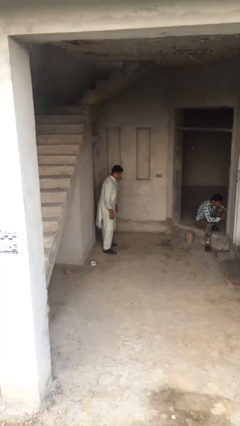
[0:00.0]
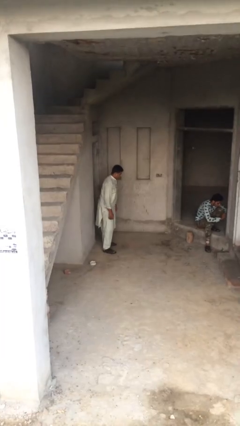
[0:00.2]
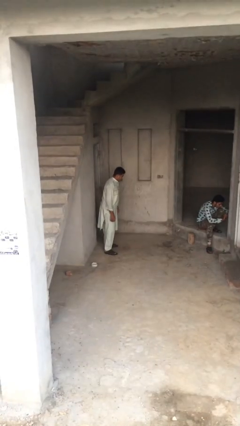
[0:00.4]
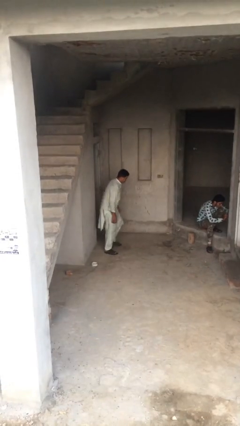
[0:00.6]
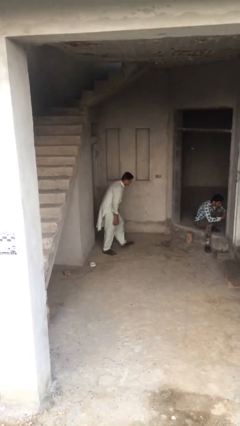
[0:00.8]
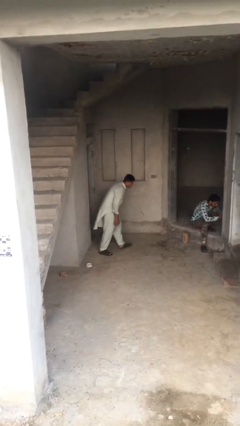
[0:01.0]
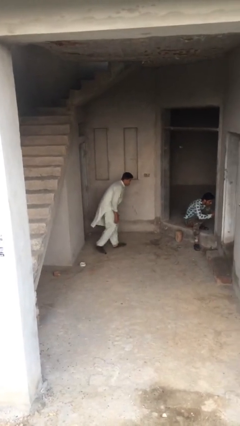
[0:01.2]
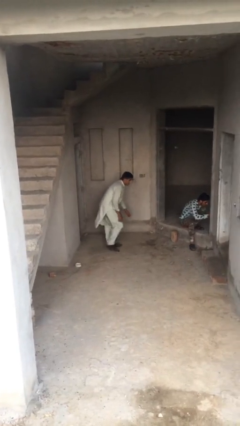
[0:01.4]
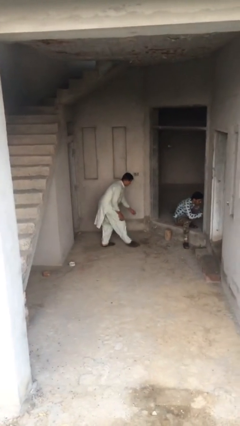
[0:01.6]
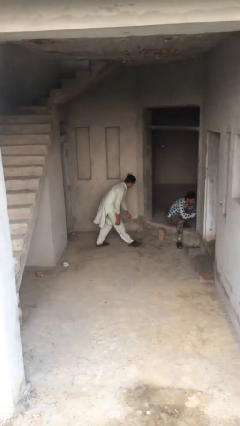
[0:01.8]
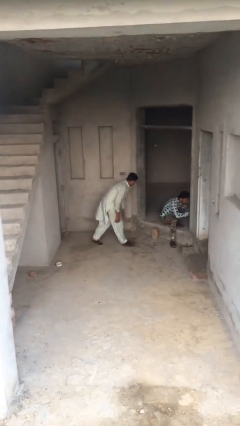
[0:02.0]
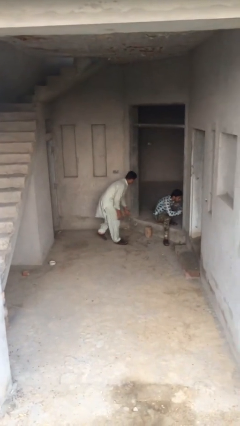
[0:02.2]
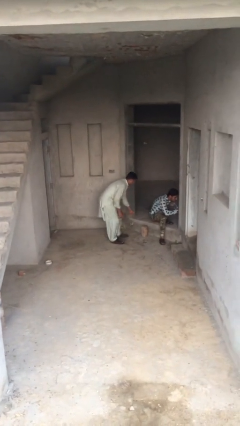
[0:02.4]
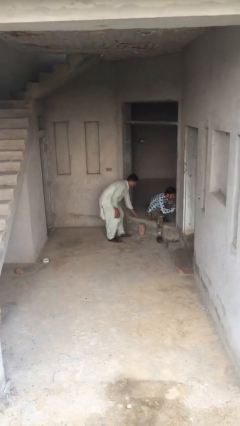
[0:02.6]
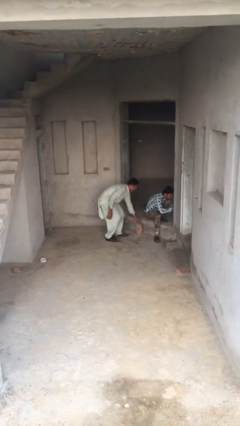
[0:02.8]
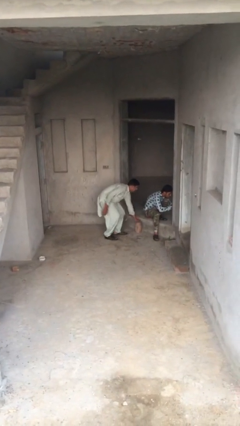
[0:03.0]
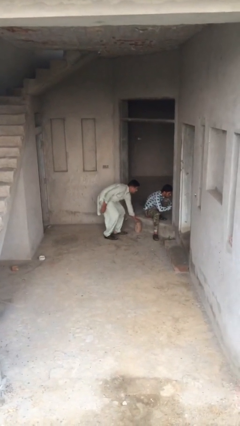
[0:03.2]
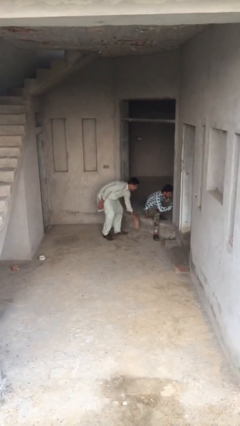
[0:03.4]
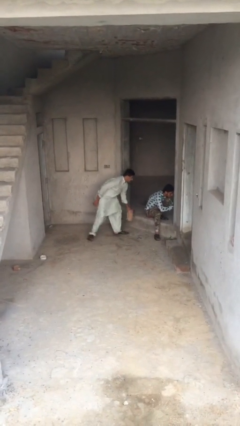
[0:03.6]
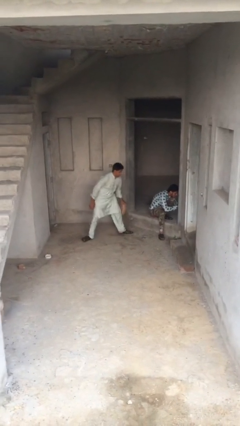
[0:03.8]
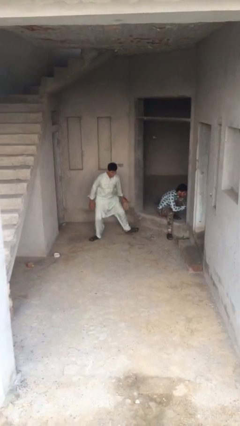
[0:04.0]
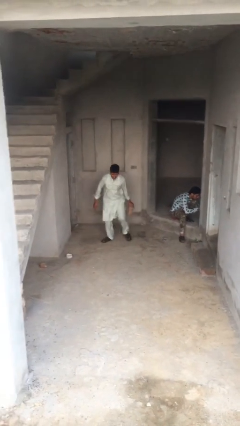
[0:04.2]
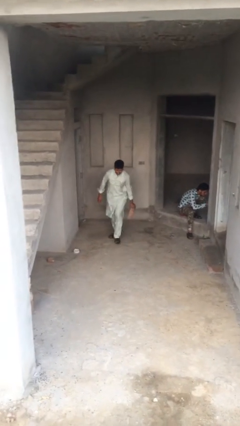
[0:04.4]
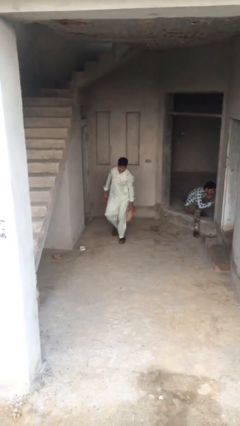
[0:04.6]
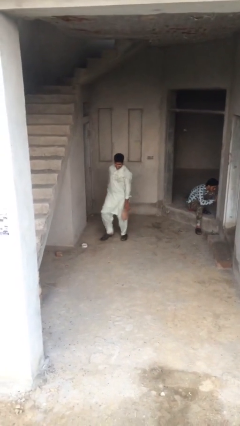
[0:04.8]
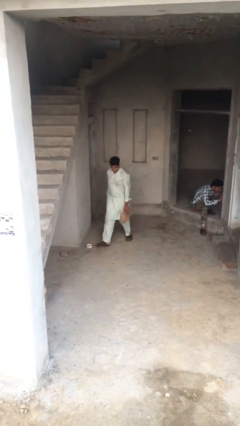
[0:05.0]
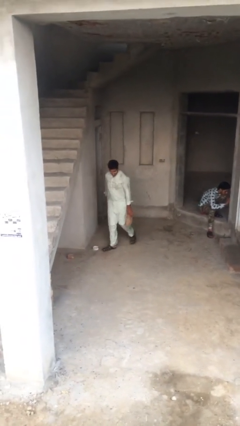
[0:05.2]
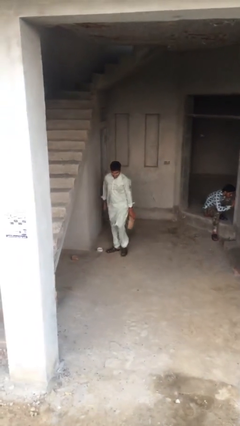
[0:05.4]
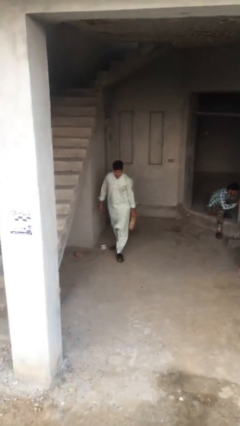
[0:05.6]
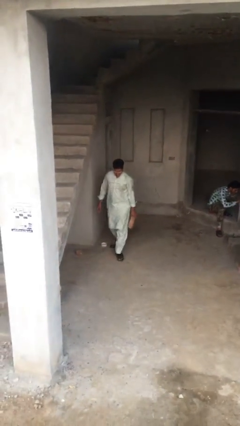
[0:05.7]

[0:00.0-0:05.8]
person steals object from person

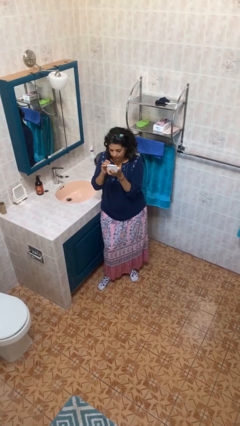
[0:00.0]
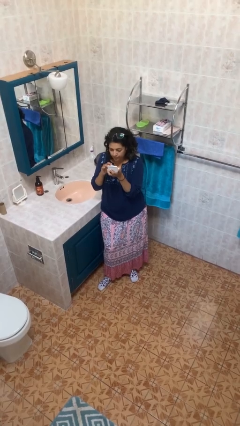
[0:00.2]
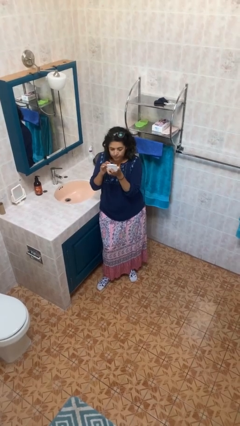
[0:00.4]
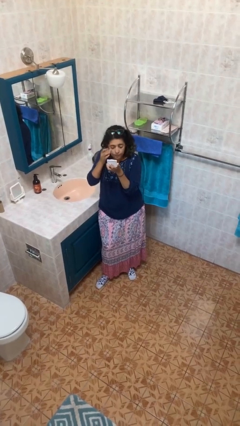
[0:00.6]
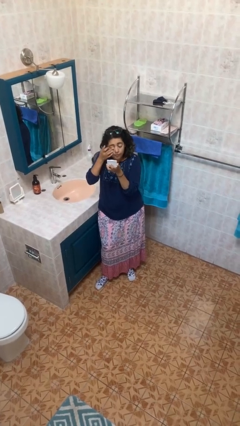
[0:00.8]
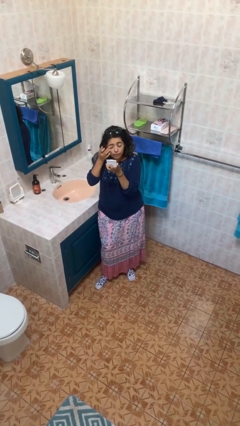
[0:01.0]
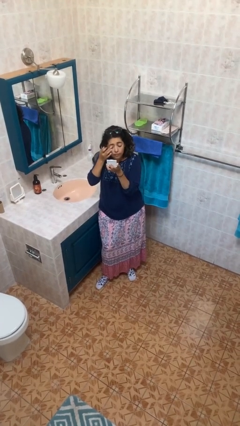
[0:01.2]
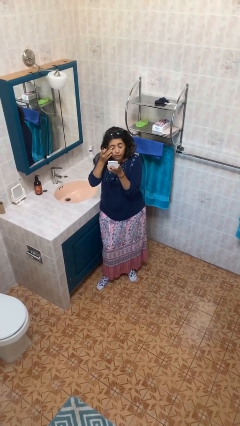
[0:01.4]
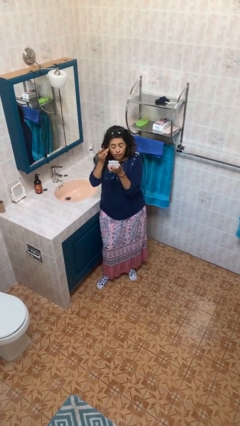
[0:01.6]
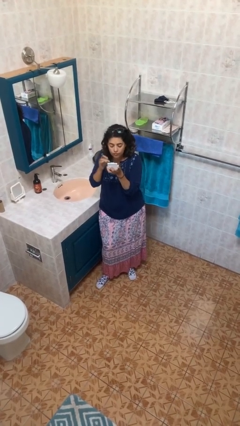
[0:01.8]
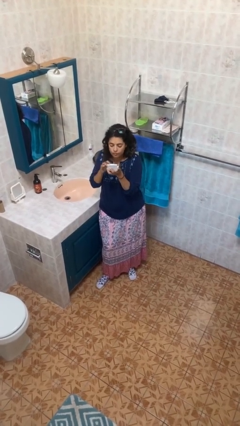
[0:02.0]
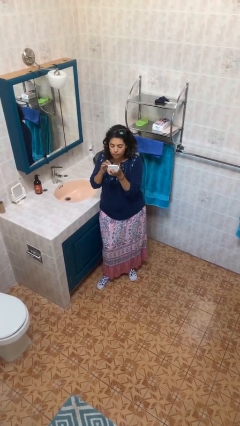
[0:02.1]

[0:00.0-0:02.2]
person applies eye makeup

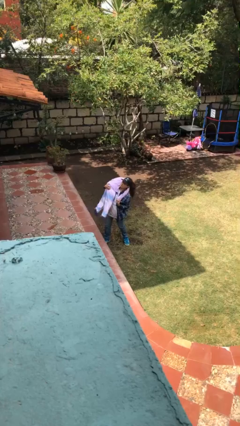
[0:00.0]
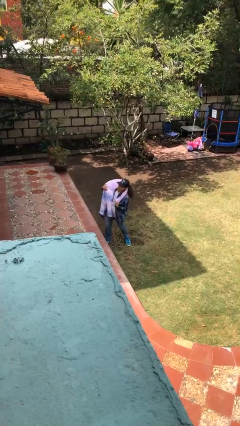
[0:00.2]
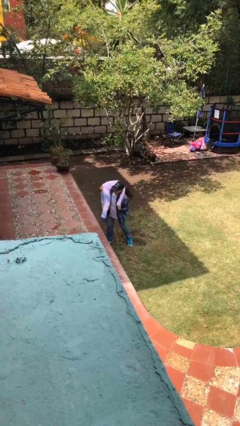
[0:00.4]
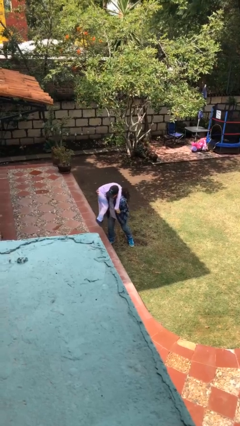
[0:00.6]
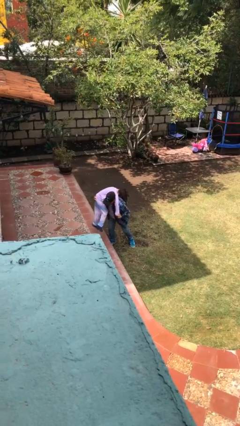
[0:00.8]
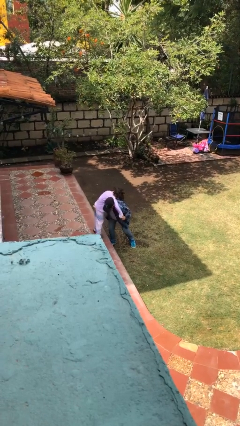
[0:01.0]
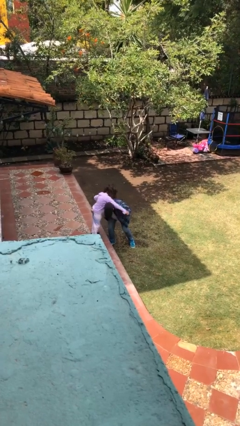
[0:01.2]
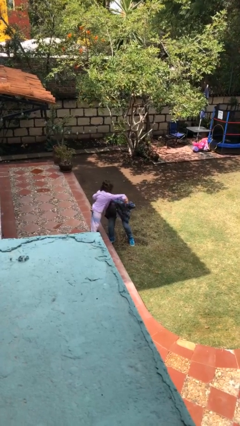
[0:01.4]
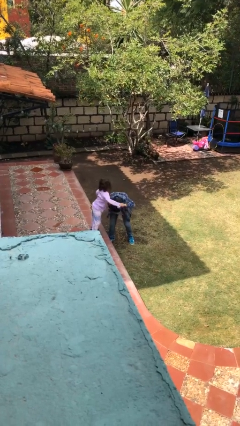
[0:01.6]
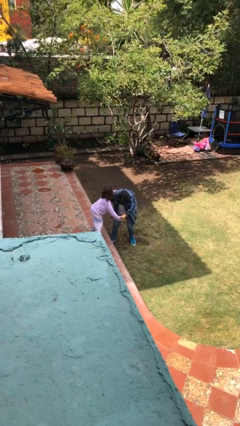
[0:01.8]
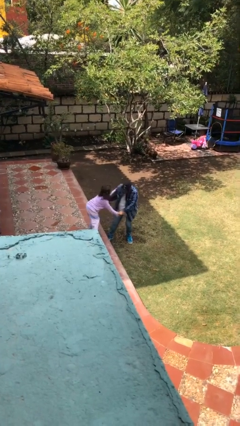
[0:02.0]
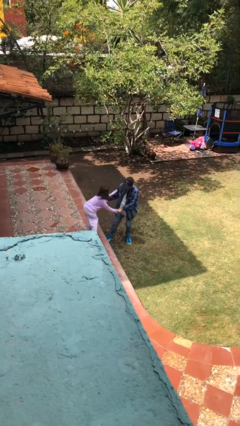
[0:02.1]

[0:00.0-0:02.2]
person puts down person

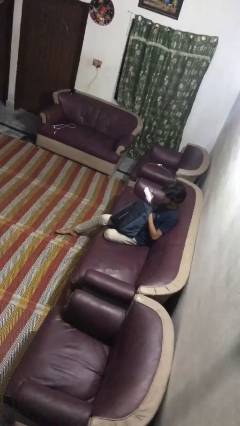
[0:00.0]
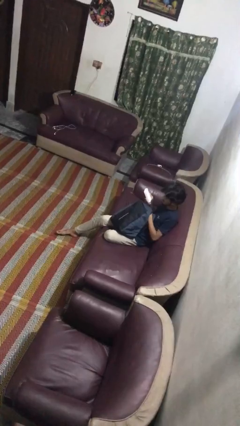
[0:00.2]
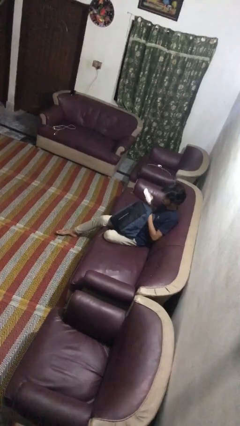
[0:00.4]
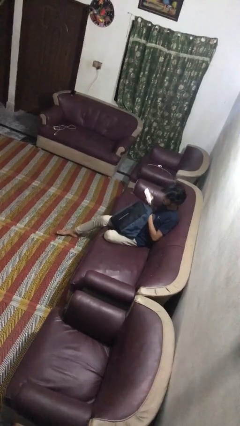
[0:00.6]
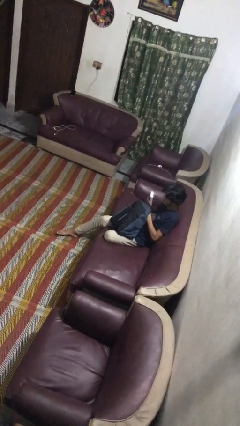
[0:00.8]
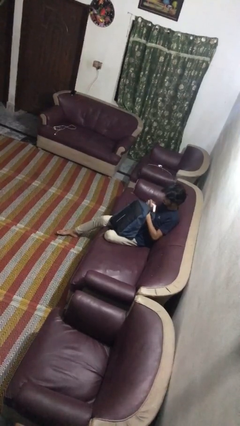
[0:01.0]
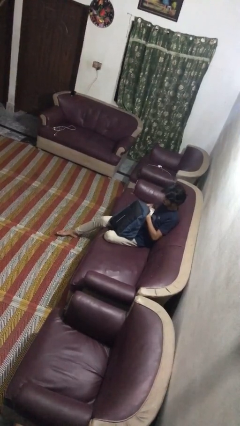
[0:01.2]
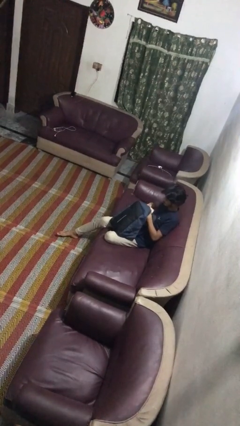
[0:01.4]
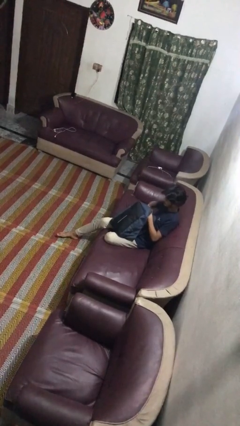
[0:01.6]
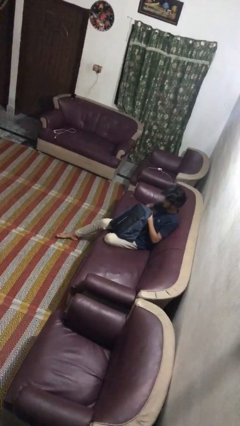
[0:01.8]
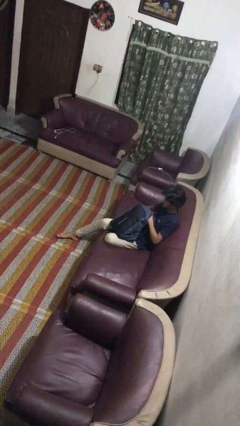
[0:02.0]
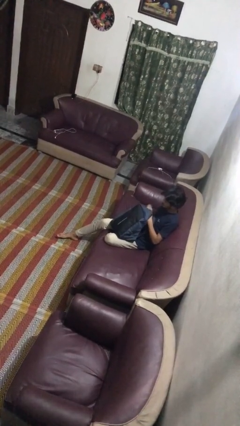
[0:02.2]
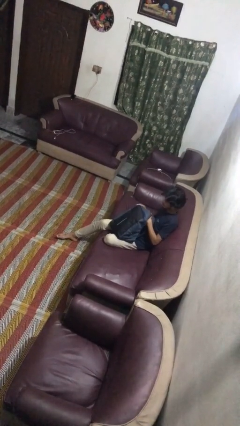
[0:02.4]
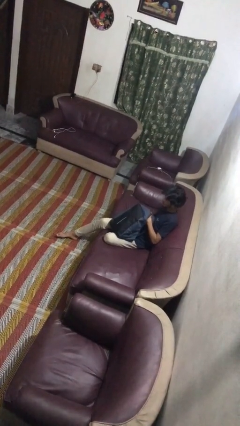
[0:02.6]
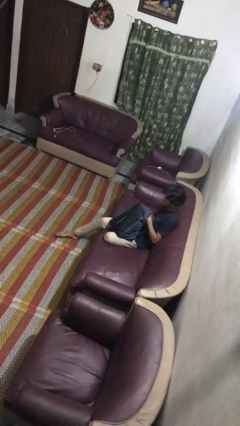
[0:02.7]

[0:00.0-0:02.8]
person puts object into backpack

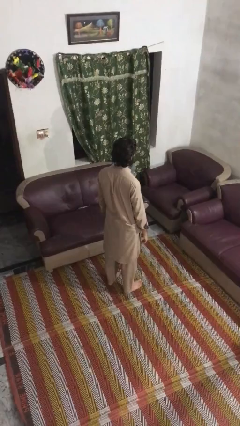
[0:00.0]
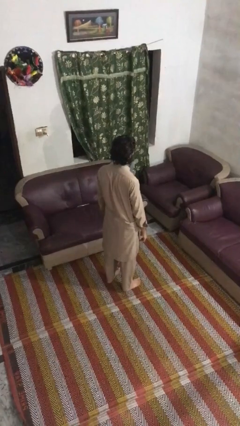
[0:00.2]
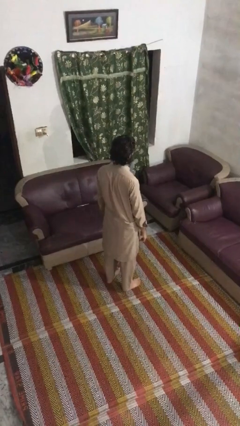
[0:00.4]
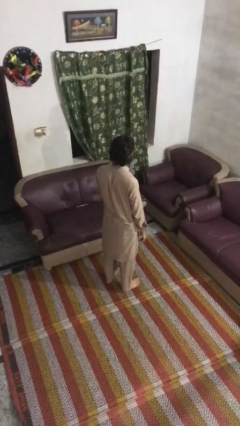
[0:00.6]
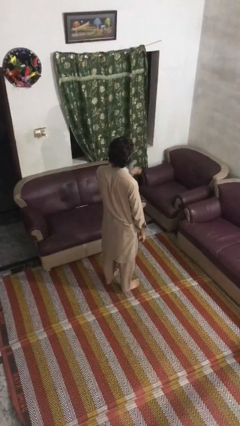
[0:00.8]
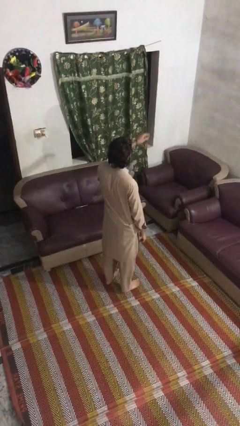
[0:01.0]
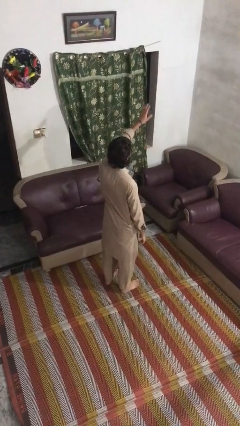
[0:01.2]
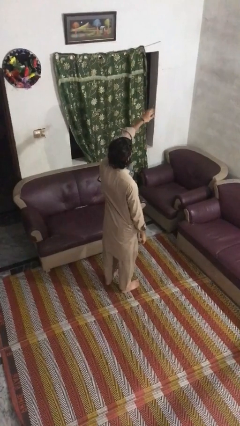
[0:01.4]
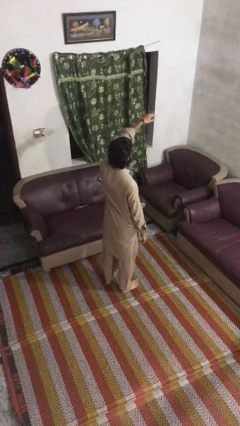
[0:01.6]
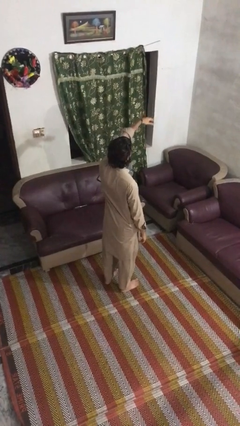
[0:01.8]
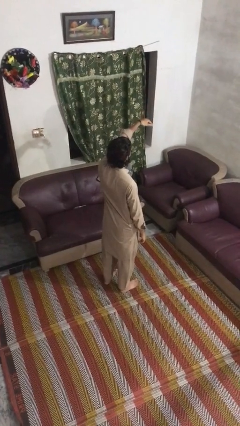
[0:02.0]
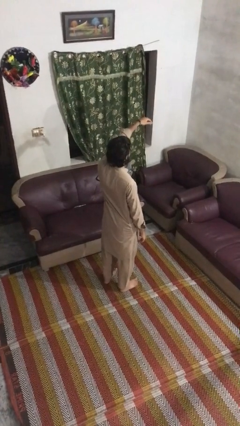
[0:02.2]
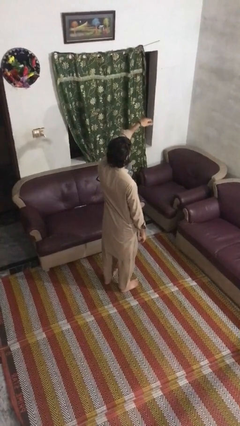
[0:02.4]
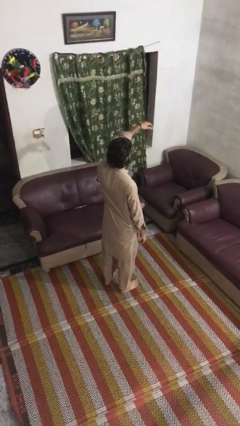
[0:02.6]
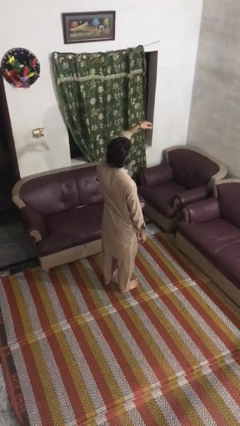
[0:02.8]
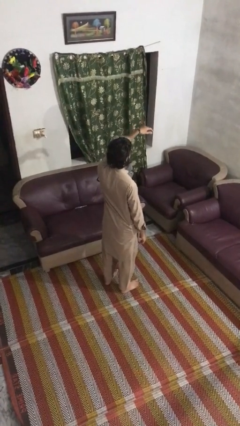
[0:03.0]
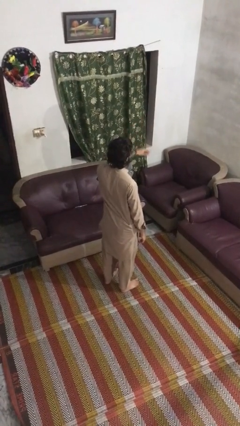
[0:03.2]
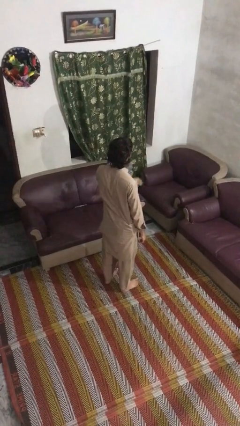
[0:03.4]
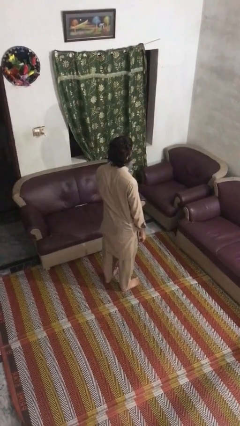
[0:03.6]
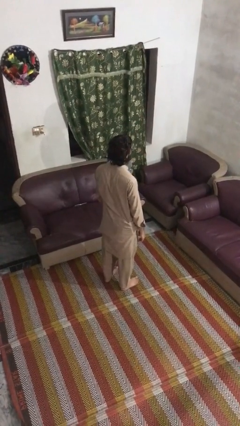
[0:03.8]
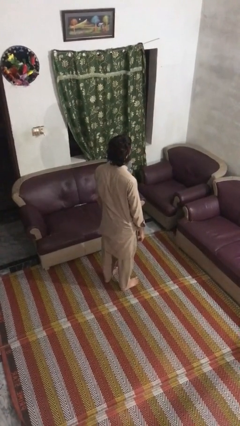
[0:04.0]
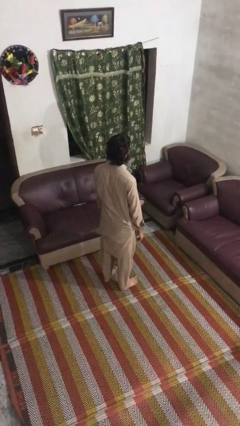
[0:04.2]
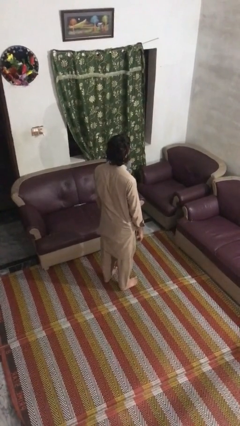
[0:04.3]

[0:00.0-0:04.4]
person gestures come here

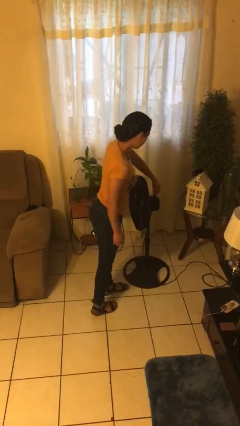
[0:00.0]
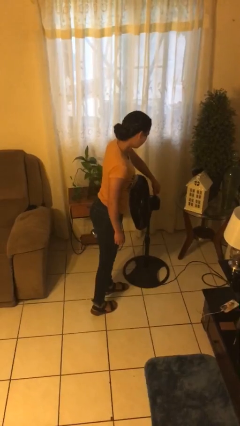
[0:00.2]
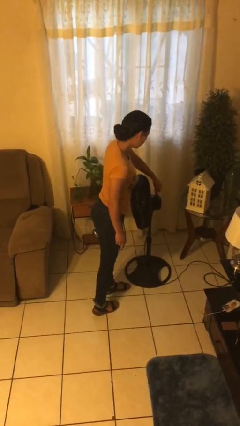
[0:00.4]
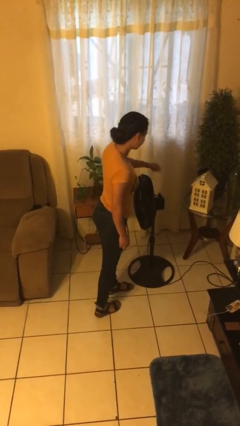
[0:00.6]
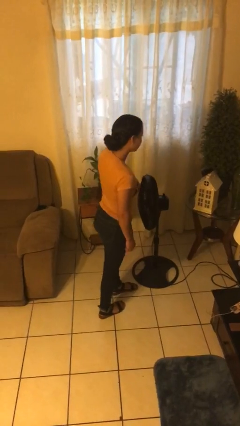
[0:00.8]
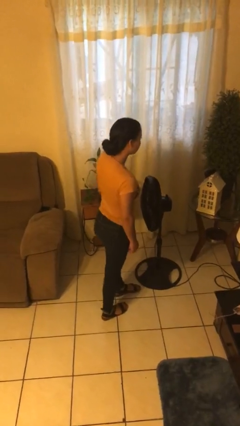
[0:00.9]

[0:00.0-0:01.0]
person turns on fan
